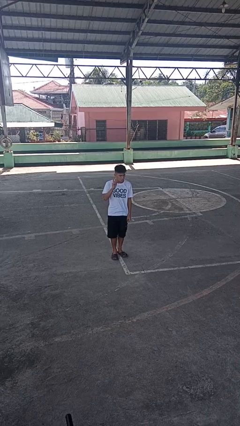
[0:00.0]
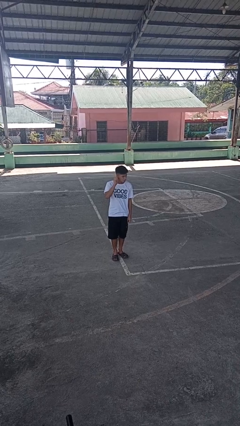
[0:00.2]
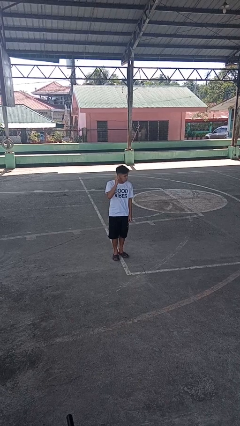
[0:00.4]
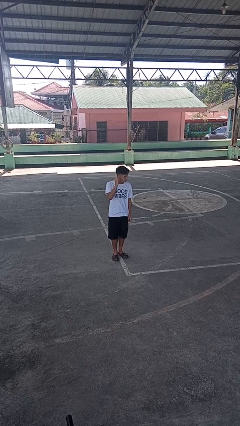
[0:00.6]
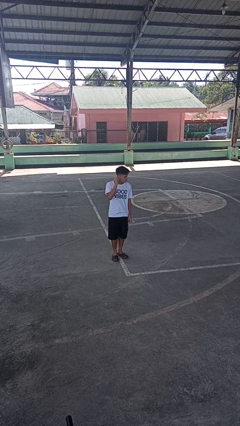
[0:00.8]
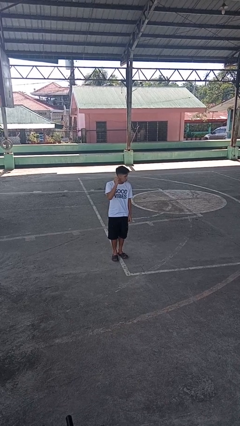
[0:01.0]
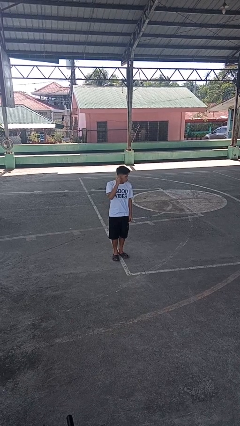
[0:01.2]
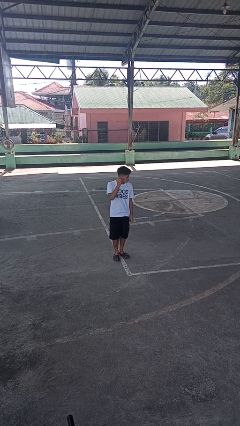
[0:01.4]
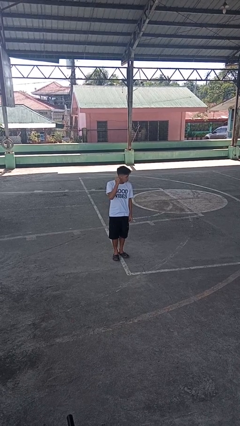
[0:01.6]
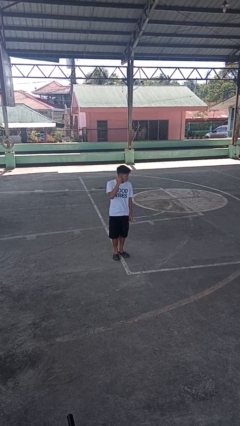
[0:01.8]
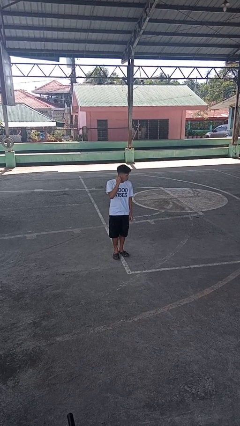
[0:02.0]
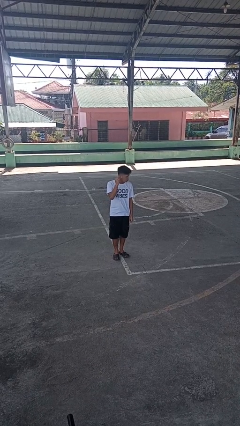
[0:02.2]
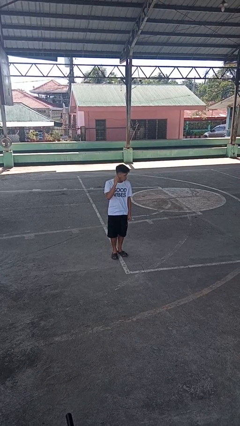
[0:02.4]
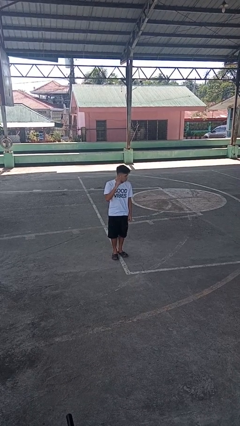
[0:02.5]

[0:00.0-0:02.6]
person touches earlobe

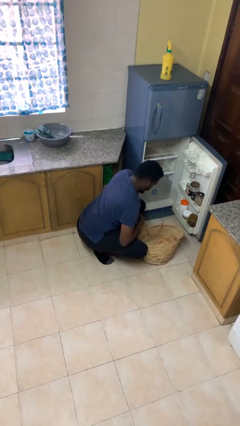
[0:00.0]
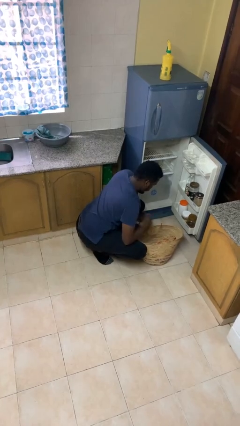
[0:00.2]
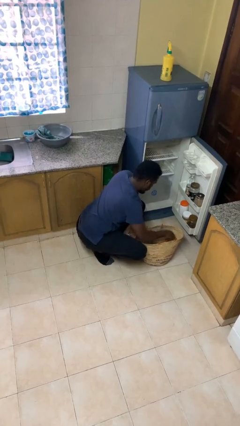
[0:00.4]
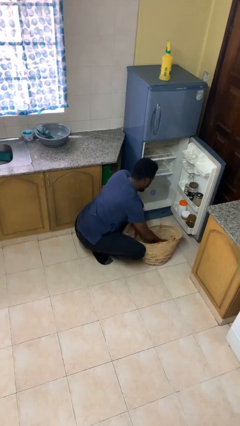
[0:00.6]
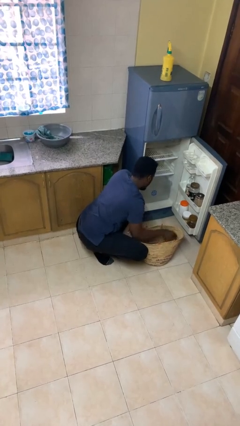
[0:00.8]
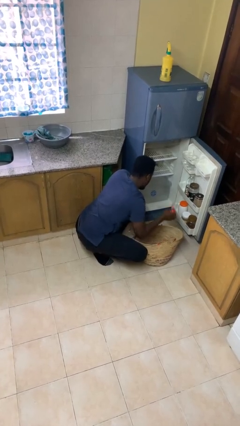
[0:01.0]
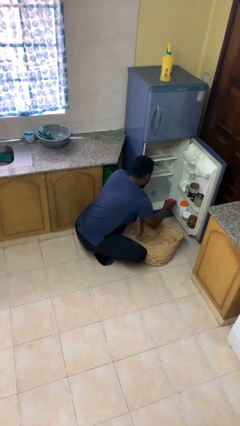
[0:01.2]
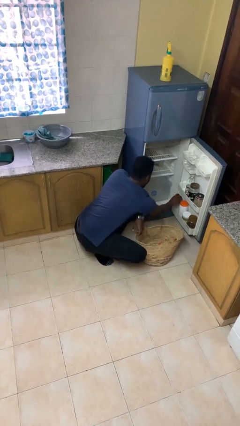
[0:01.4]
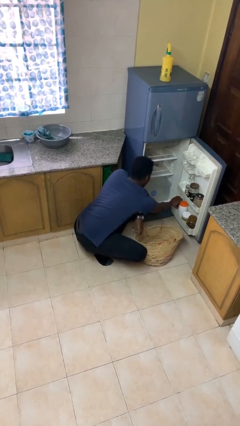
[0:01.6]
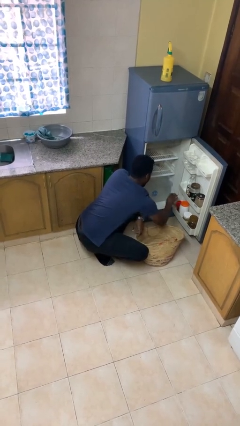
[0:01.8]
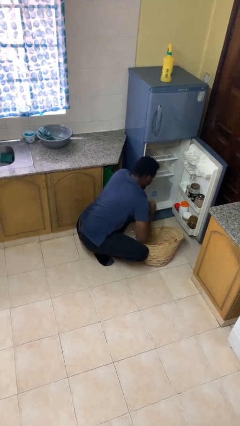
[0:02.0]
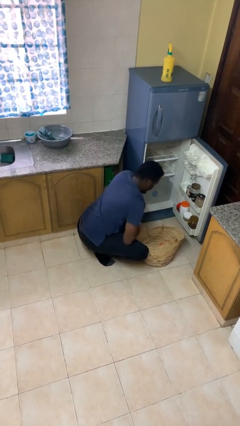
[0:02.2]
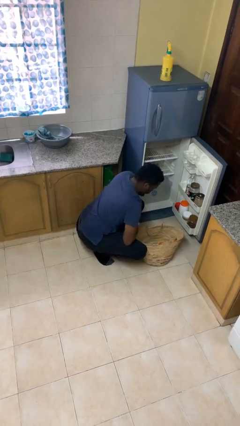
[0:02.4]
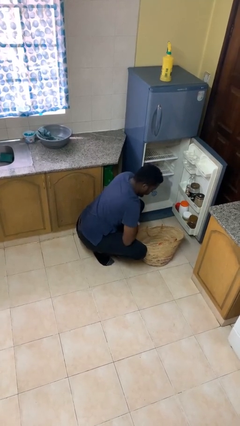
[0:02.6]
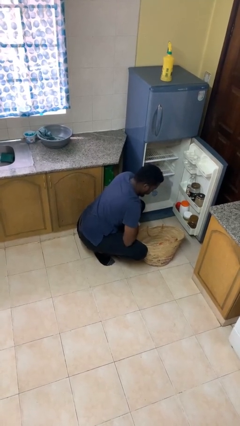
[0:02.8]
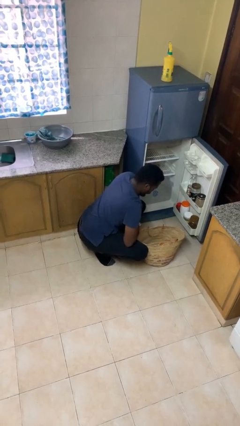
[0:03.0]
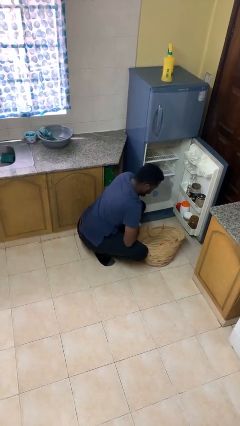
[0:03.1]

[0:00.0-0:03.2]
person loads groceries into refrigerator

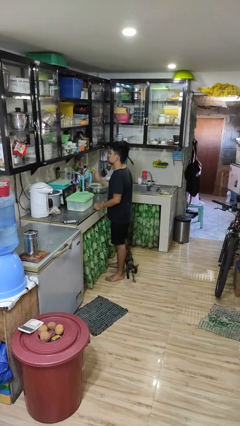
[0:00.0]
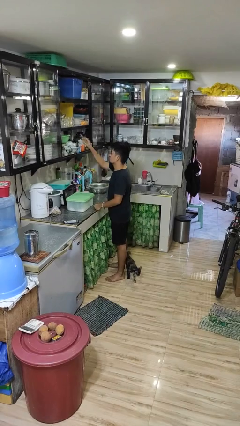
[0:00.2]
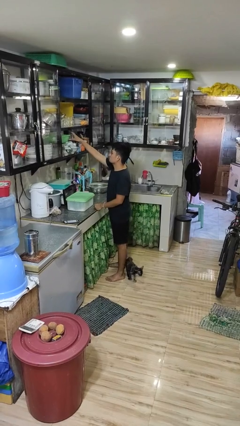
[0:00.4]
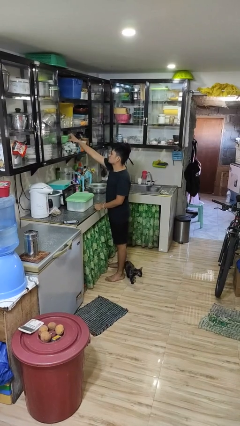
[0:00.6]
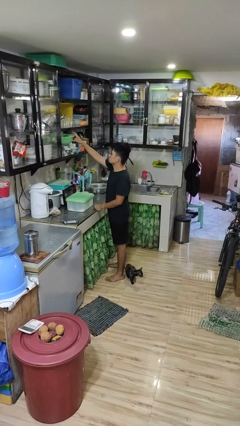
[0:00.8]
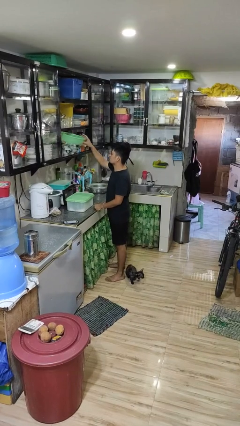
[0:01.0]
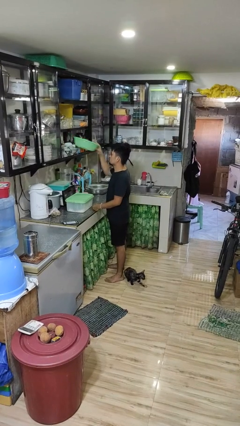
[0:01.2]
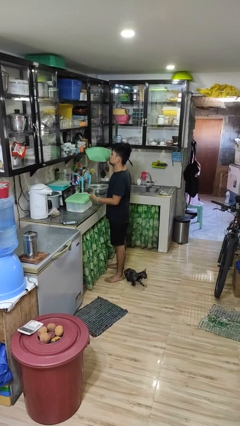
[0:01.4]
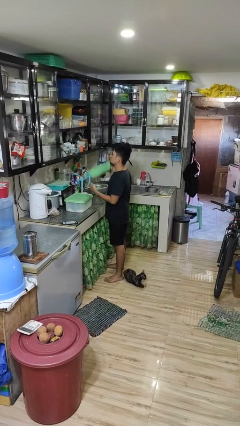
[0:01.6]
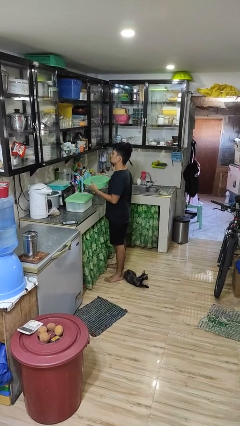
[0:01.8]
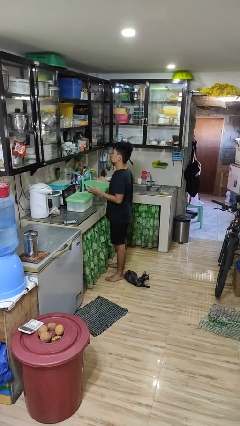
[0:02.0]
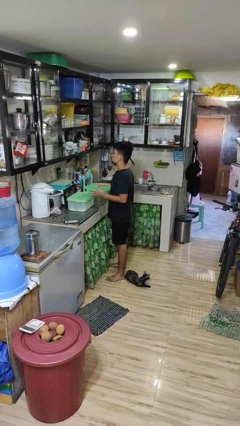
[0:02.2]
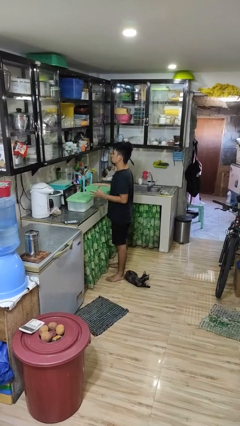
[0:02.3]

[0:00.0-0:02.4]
person picks up object from cabinet

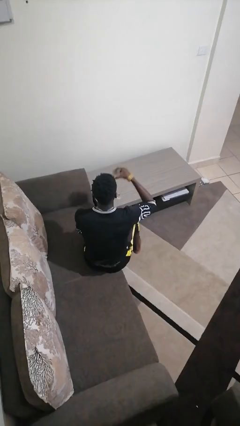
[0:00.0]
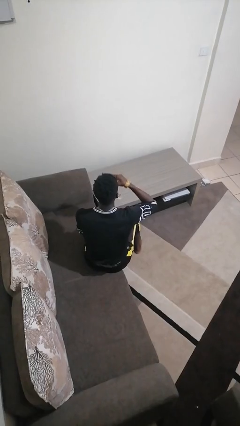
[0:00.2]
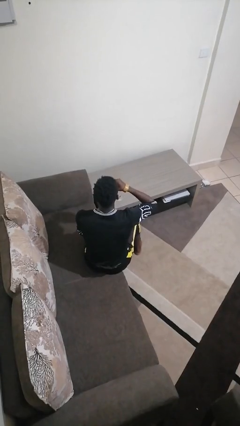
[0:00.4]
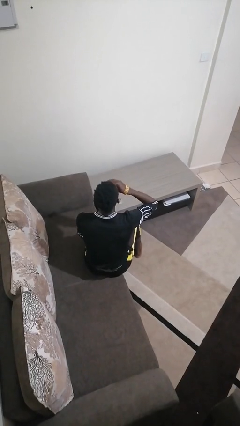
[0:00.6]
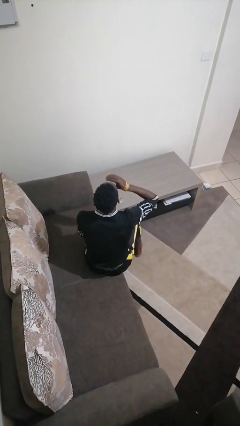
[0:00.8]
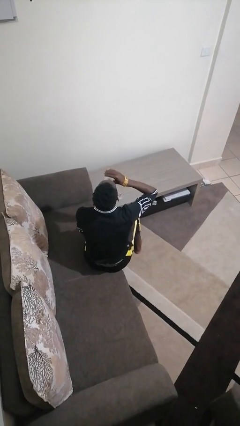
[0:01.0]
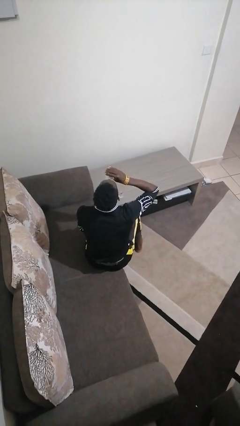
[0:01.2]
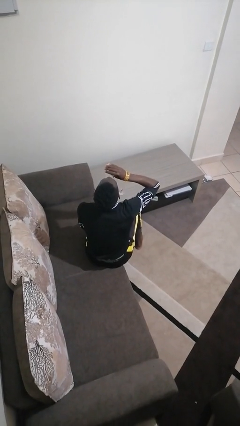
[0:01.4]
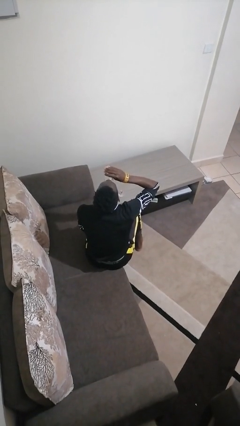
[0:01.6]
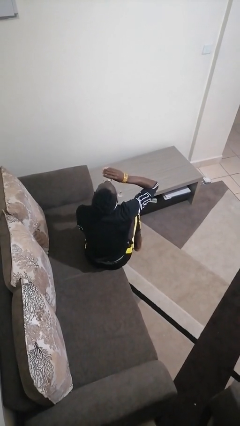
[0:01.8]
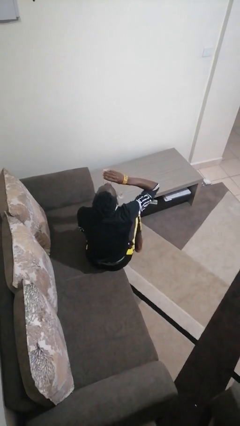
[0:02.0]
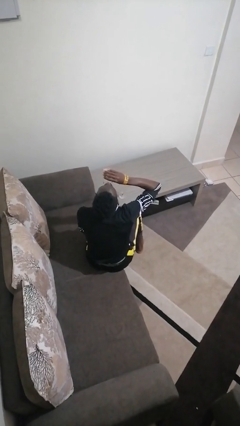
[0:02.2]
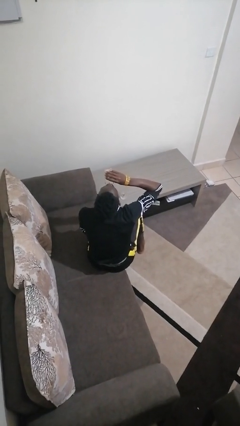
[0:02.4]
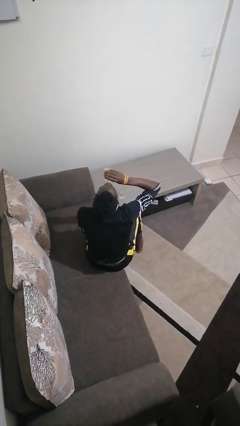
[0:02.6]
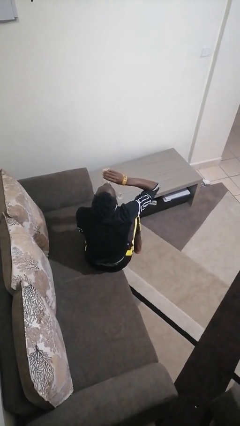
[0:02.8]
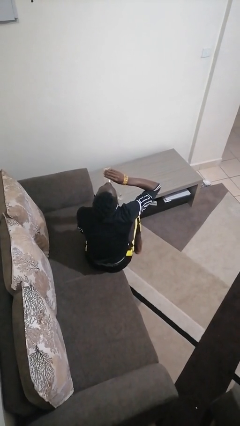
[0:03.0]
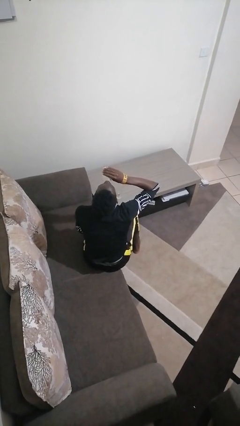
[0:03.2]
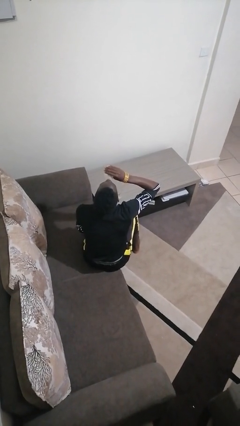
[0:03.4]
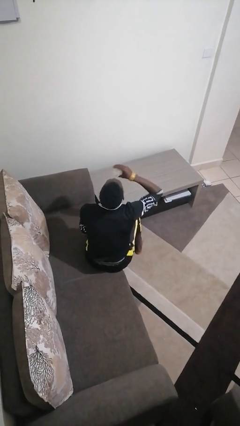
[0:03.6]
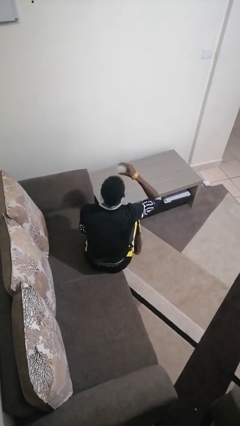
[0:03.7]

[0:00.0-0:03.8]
person drinks from shotglass

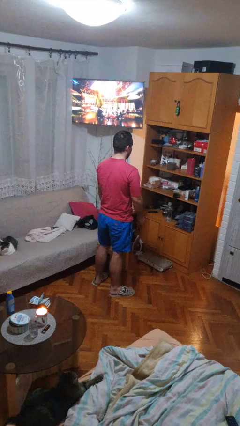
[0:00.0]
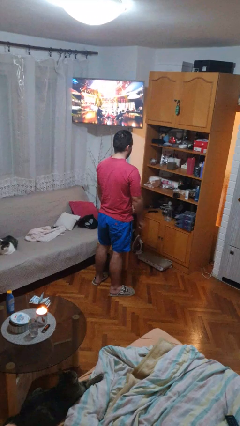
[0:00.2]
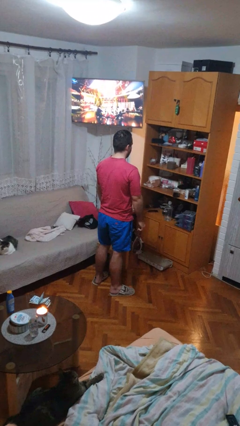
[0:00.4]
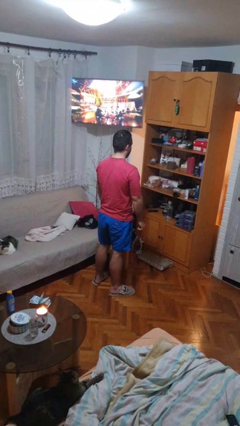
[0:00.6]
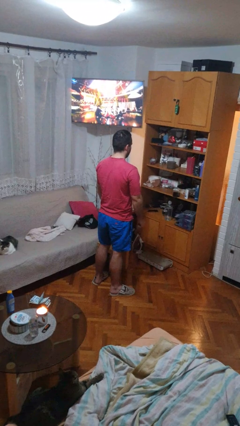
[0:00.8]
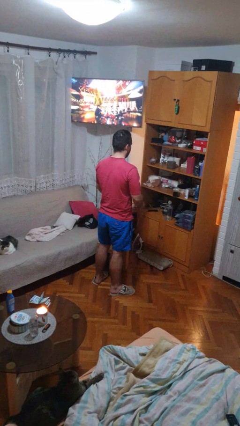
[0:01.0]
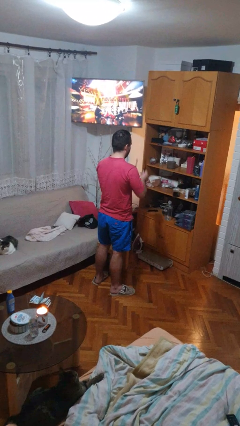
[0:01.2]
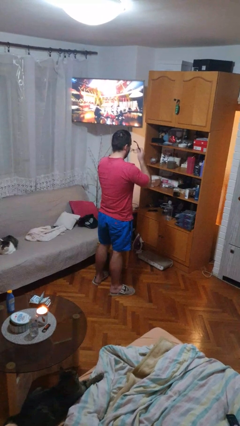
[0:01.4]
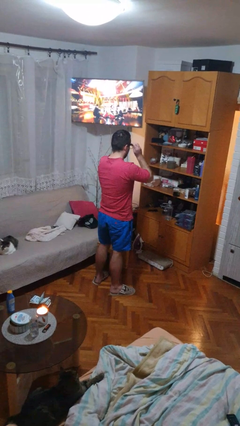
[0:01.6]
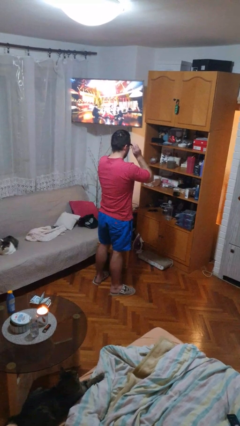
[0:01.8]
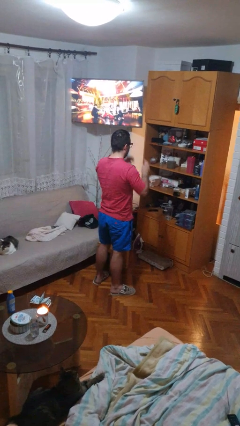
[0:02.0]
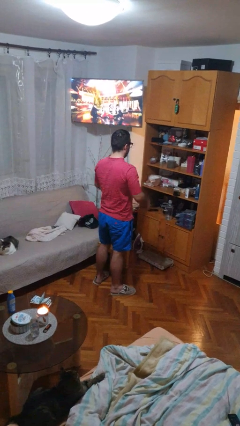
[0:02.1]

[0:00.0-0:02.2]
person puts on glasses

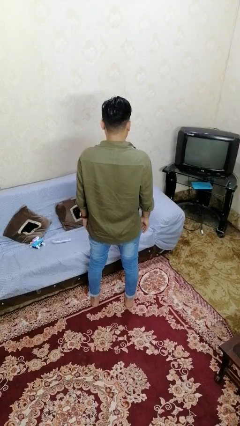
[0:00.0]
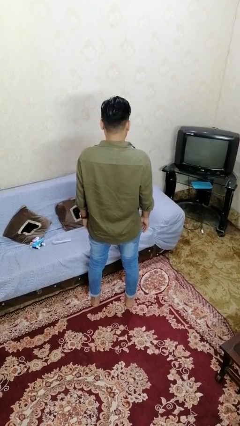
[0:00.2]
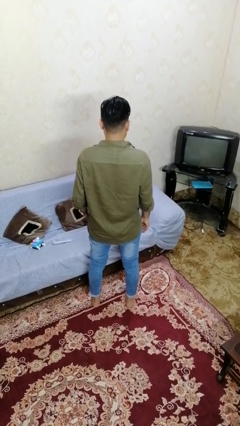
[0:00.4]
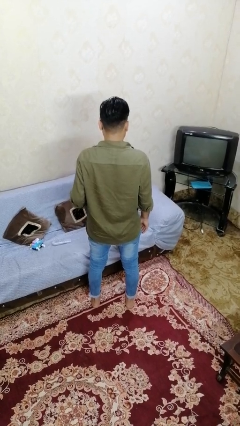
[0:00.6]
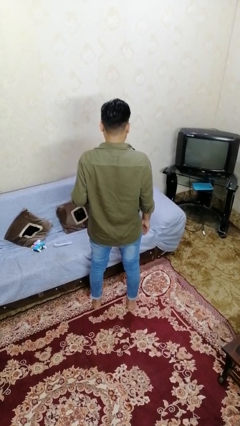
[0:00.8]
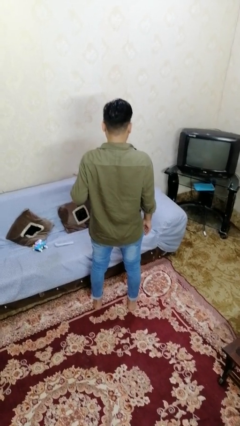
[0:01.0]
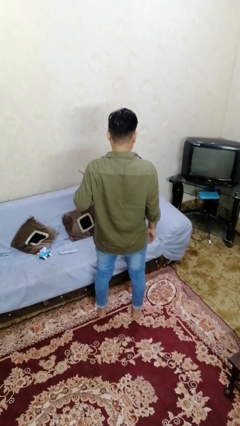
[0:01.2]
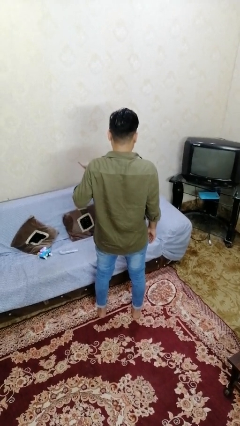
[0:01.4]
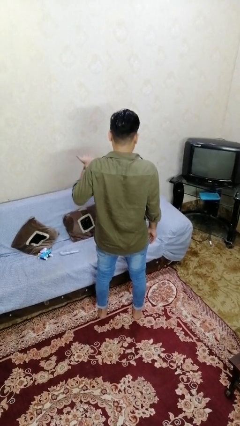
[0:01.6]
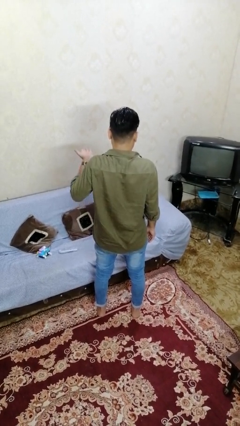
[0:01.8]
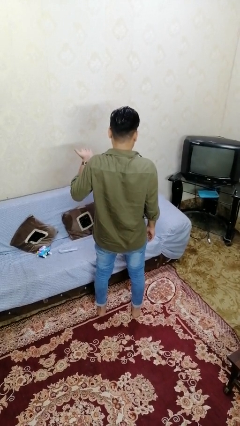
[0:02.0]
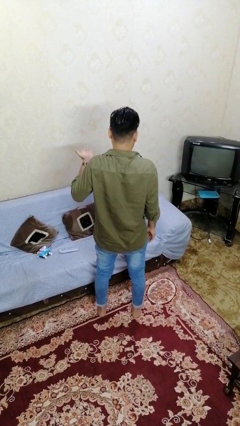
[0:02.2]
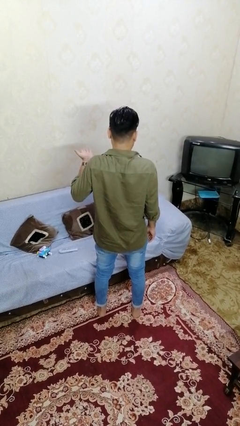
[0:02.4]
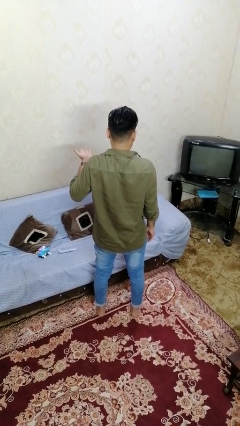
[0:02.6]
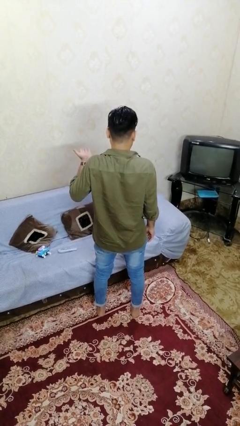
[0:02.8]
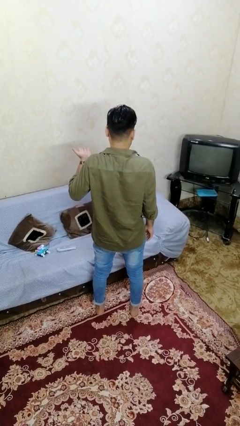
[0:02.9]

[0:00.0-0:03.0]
person gestures swipe up

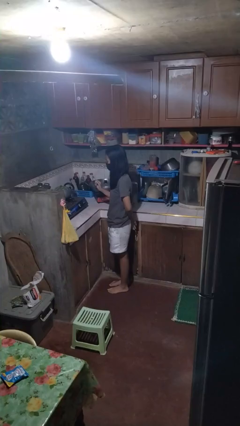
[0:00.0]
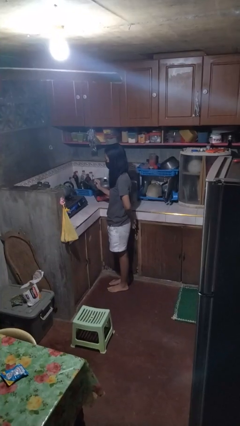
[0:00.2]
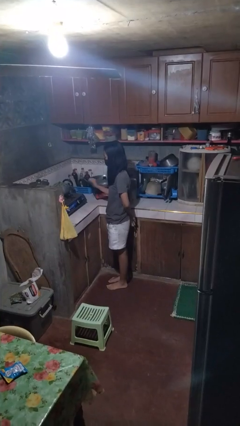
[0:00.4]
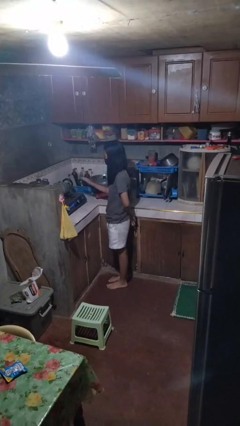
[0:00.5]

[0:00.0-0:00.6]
person burns hand
